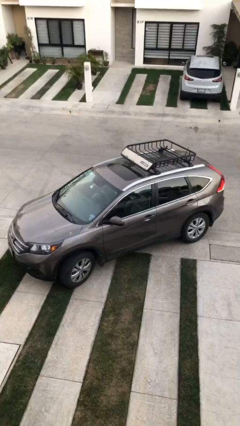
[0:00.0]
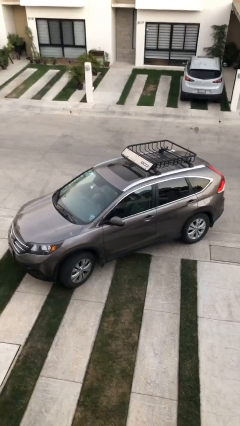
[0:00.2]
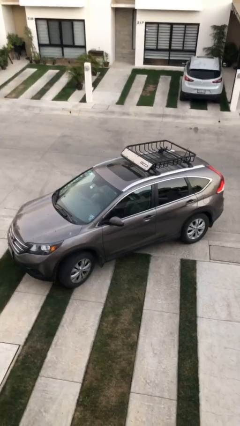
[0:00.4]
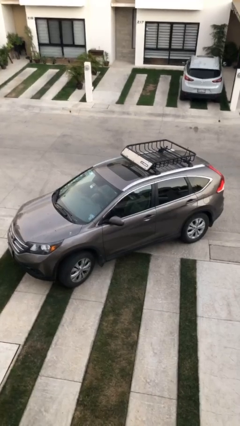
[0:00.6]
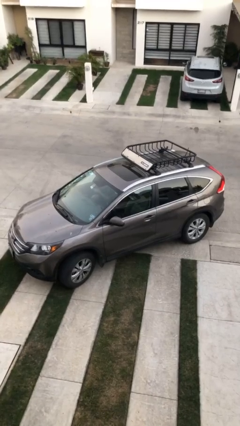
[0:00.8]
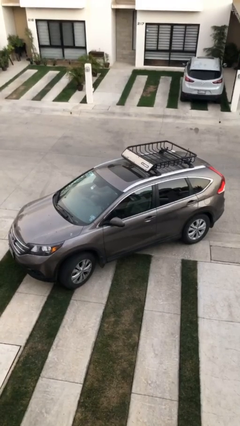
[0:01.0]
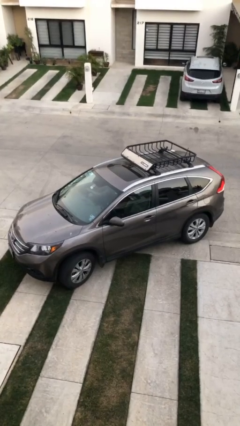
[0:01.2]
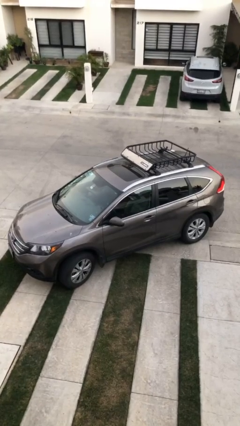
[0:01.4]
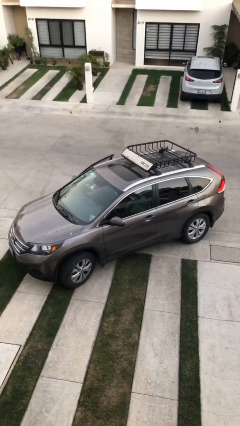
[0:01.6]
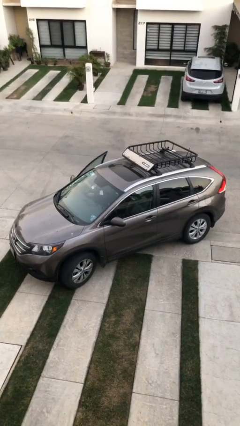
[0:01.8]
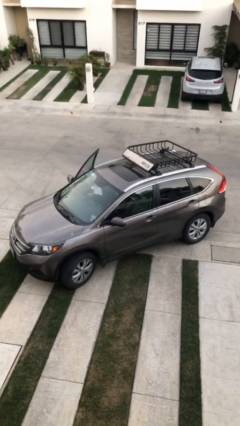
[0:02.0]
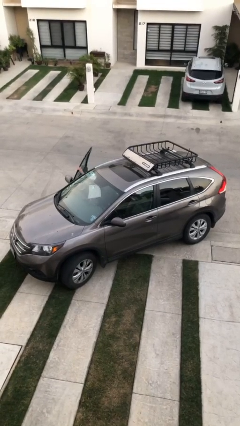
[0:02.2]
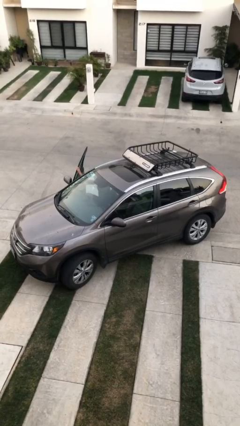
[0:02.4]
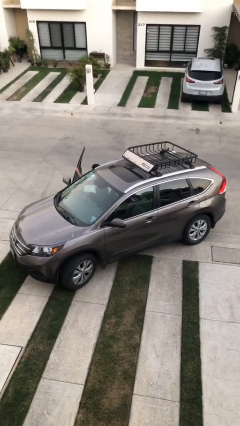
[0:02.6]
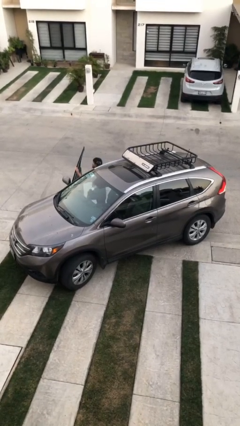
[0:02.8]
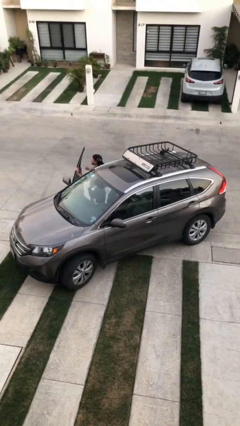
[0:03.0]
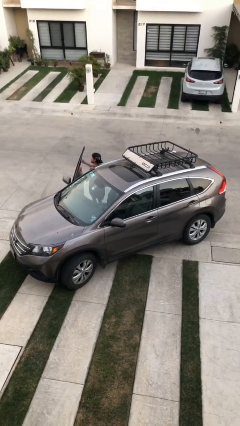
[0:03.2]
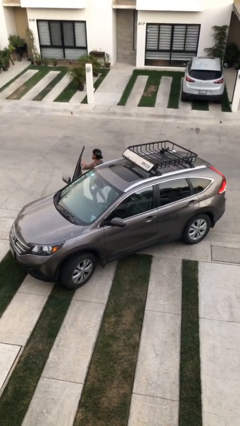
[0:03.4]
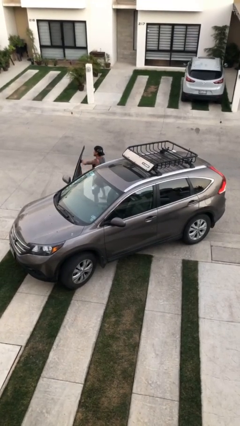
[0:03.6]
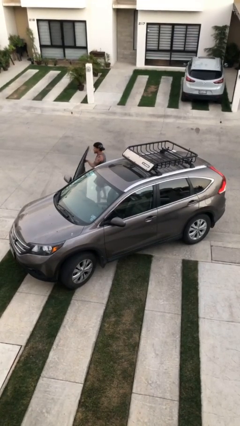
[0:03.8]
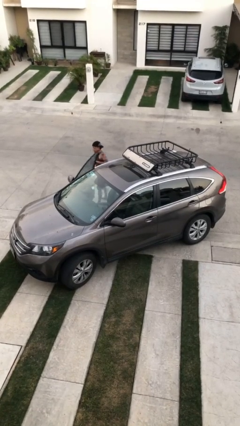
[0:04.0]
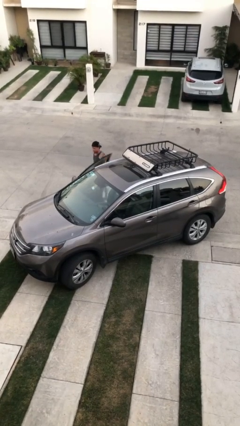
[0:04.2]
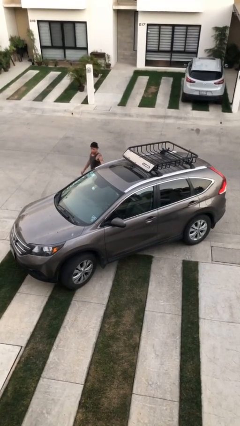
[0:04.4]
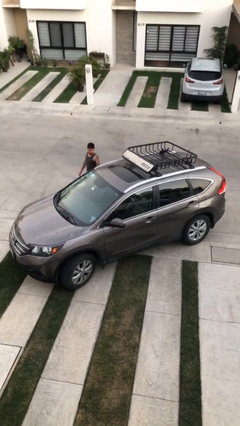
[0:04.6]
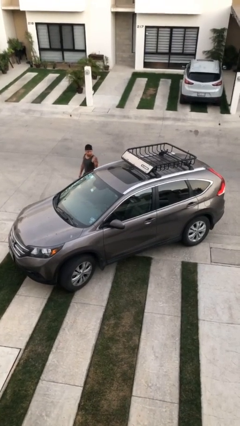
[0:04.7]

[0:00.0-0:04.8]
car drops off person

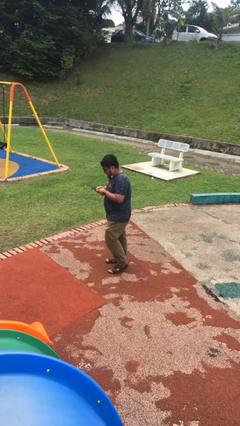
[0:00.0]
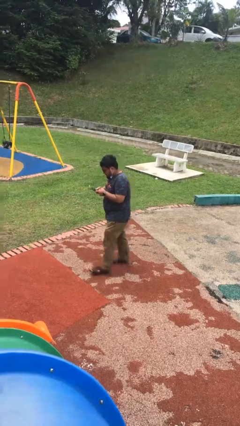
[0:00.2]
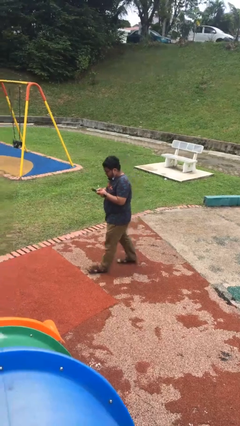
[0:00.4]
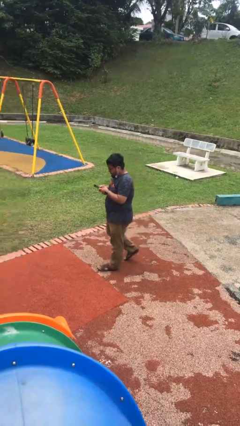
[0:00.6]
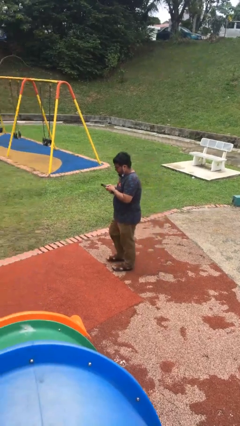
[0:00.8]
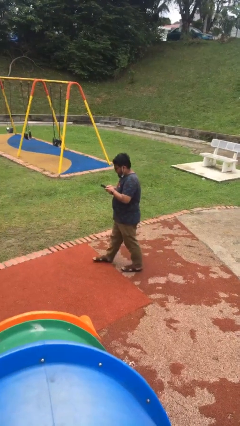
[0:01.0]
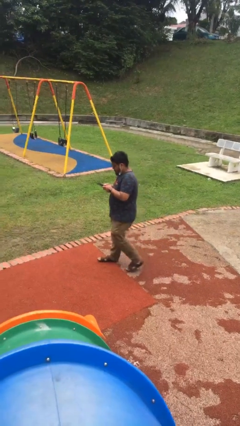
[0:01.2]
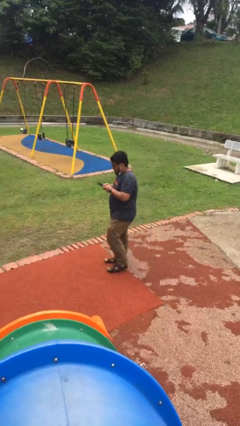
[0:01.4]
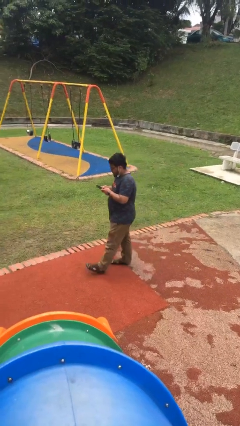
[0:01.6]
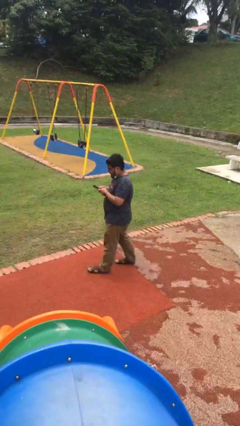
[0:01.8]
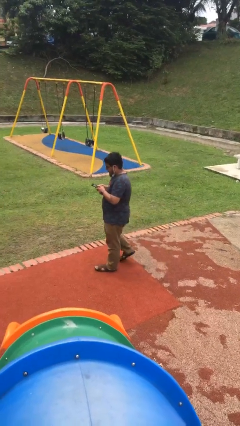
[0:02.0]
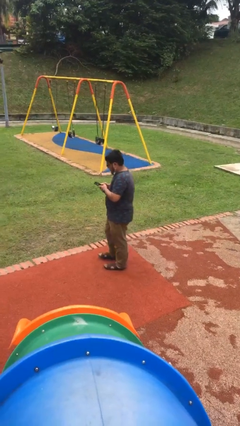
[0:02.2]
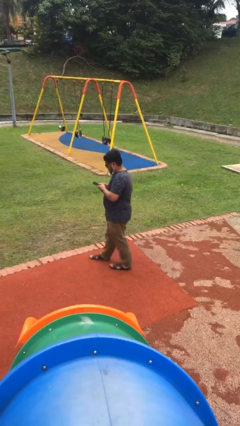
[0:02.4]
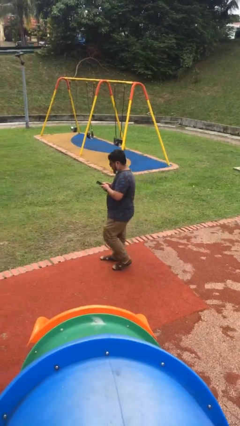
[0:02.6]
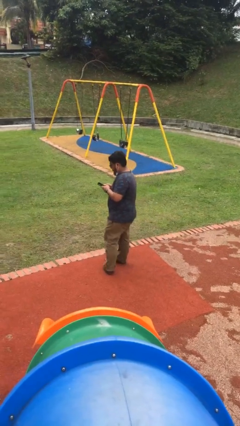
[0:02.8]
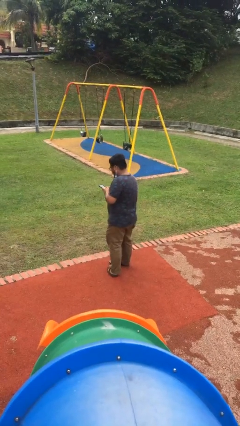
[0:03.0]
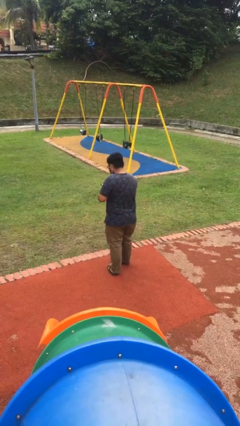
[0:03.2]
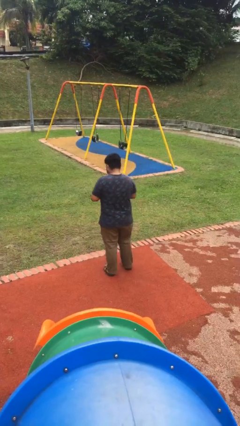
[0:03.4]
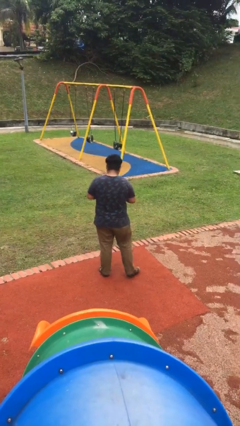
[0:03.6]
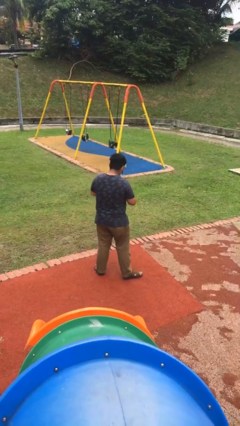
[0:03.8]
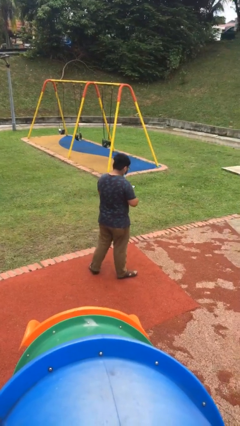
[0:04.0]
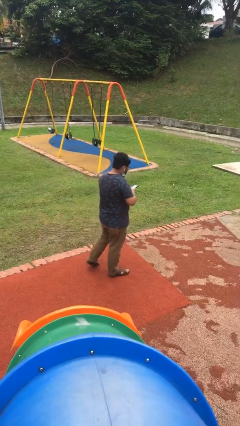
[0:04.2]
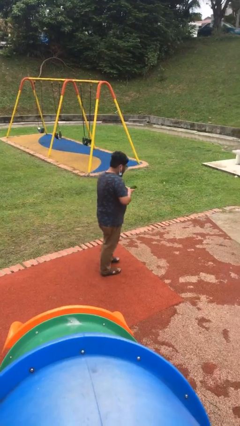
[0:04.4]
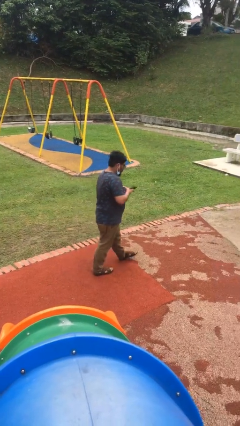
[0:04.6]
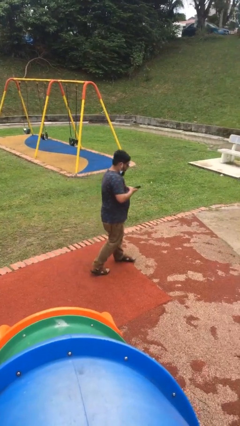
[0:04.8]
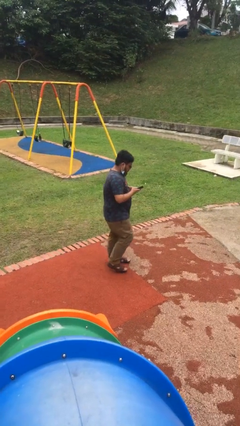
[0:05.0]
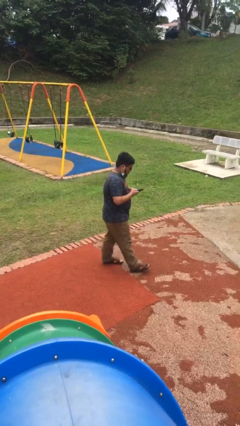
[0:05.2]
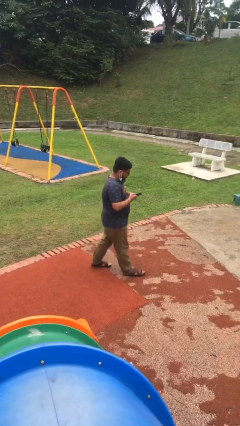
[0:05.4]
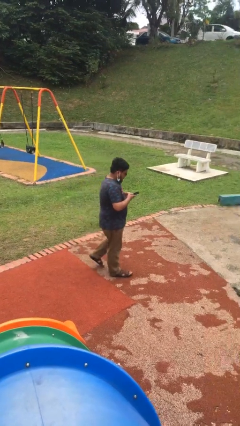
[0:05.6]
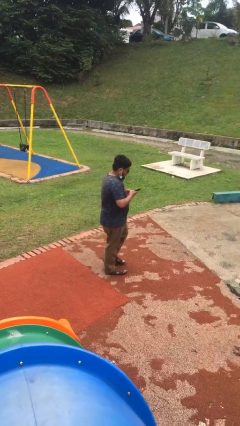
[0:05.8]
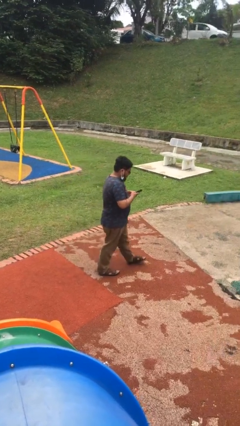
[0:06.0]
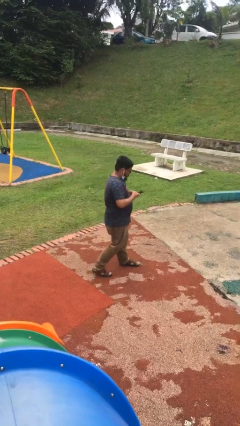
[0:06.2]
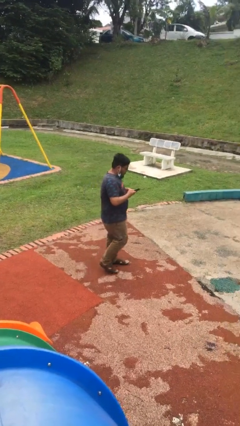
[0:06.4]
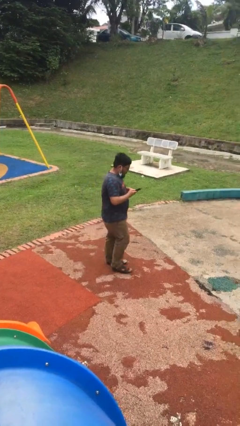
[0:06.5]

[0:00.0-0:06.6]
person texts on phone

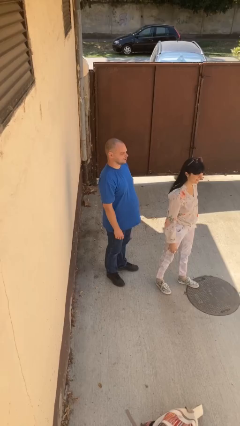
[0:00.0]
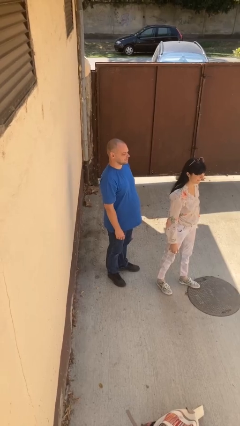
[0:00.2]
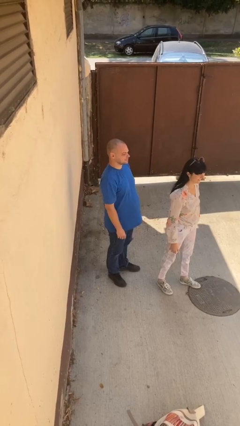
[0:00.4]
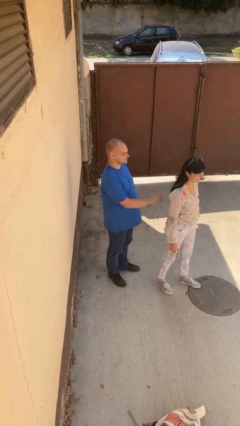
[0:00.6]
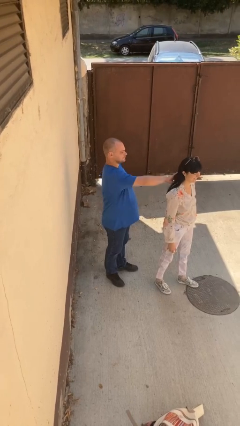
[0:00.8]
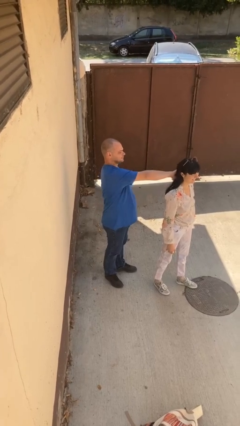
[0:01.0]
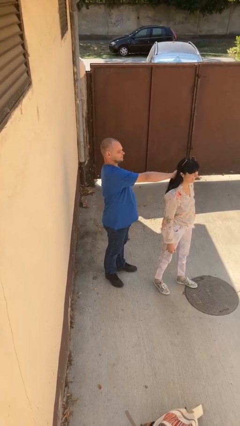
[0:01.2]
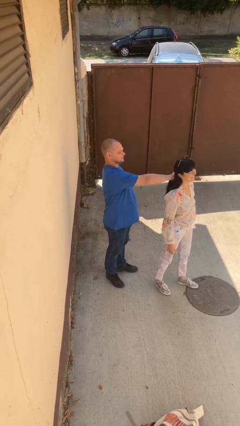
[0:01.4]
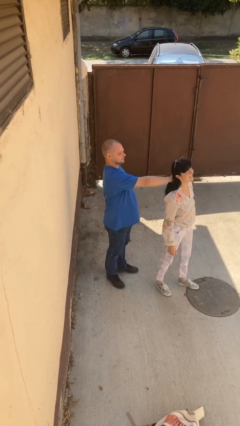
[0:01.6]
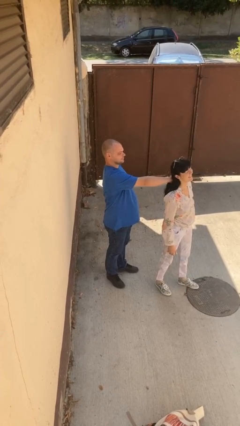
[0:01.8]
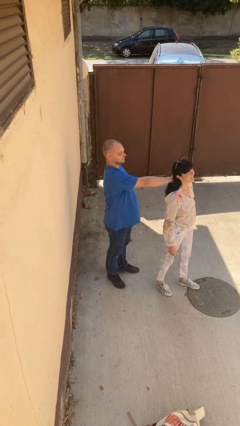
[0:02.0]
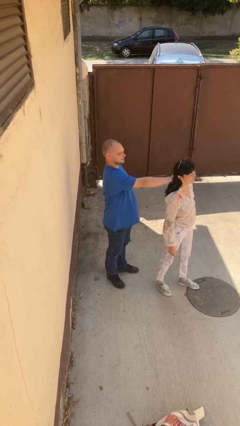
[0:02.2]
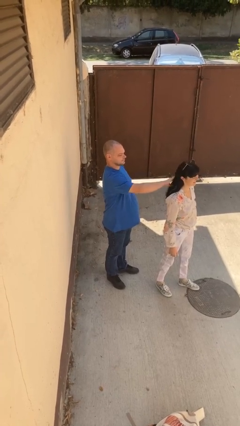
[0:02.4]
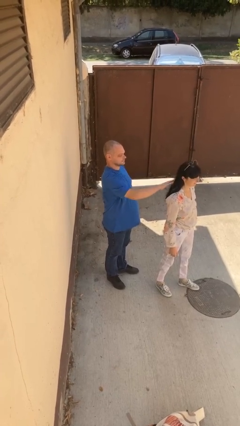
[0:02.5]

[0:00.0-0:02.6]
person grabs person by hair

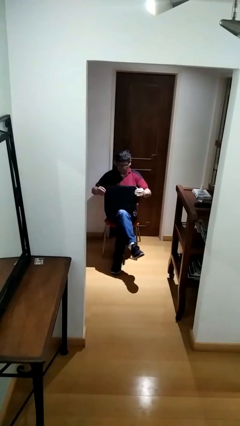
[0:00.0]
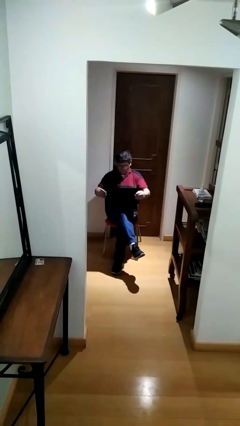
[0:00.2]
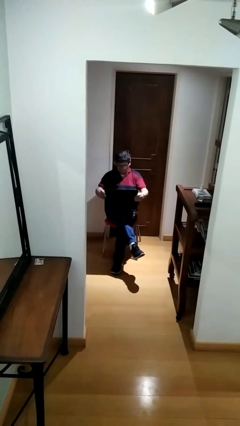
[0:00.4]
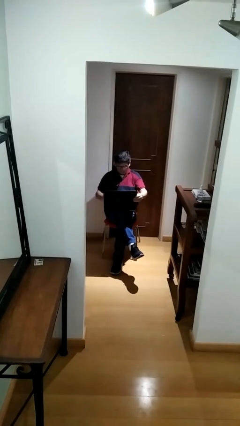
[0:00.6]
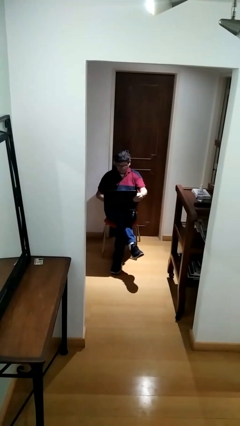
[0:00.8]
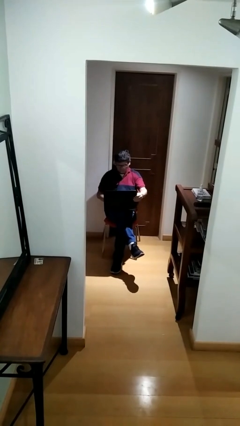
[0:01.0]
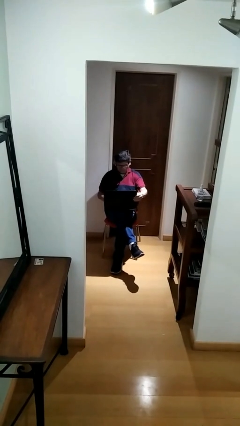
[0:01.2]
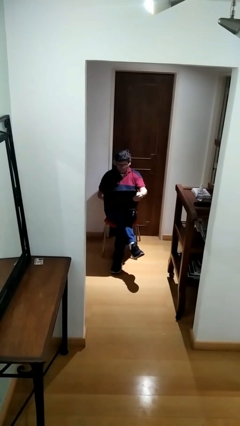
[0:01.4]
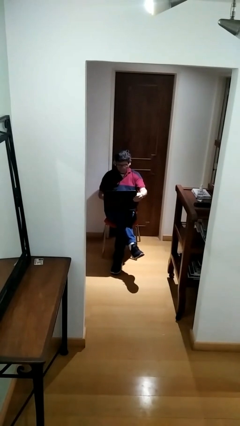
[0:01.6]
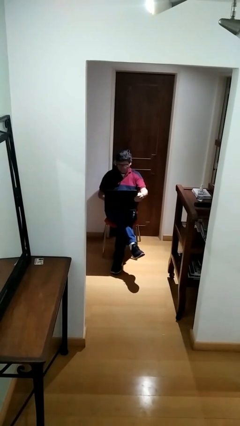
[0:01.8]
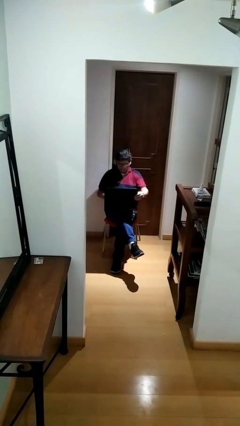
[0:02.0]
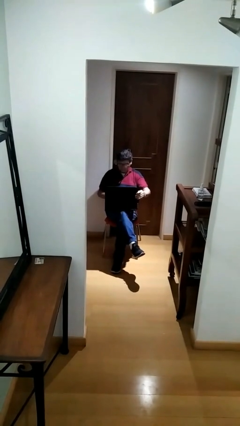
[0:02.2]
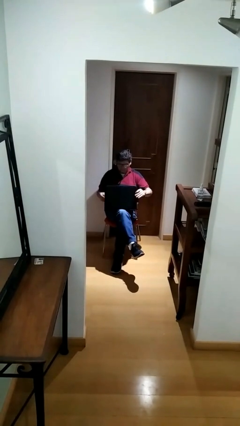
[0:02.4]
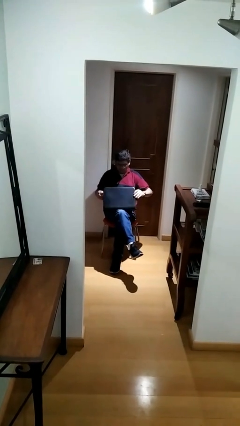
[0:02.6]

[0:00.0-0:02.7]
person interacts with laptop

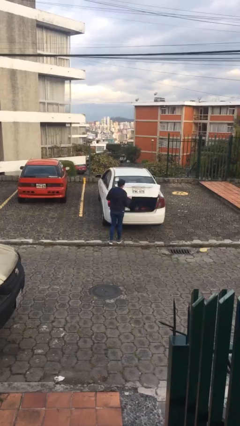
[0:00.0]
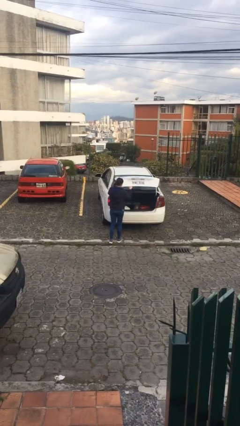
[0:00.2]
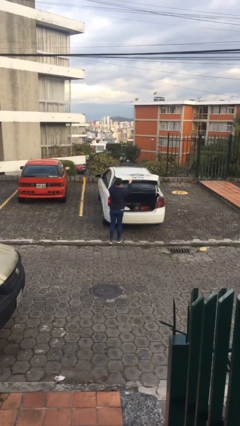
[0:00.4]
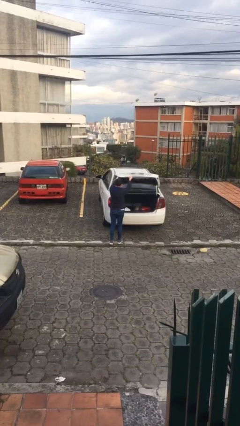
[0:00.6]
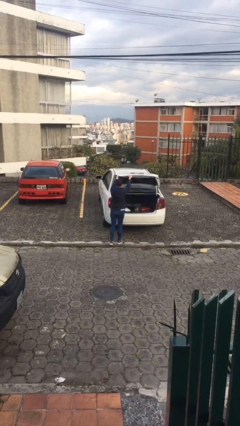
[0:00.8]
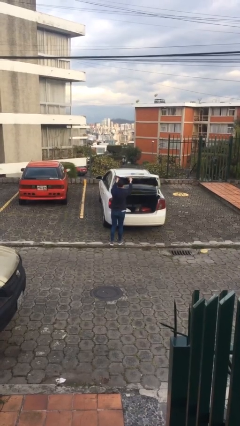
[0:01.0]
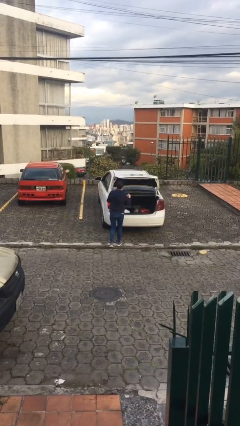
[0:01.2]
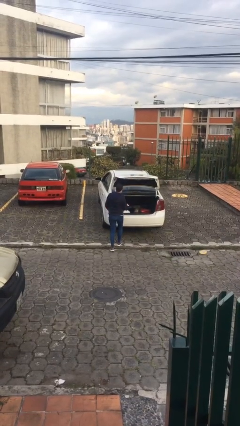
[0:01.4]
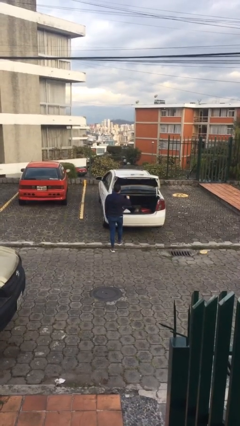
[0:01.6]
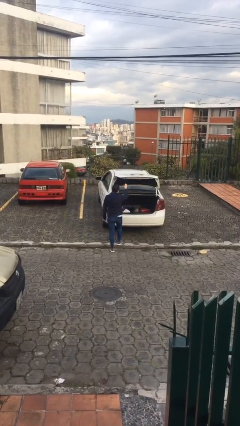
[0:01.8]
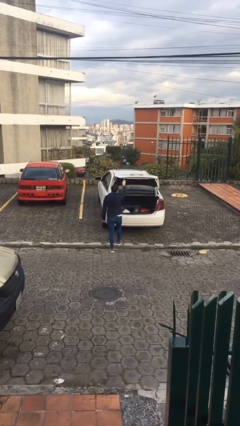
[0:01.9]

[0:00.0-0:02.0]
person opens car trunk
